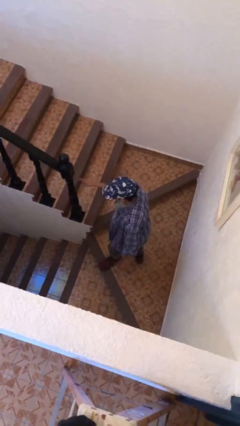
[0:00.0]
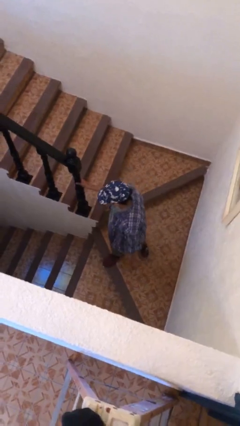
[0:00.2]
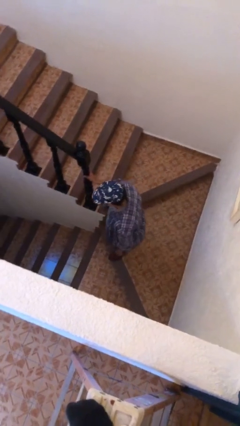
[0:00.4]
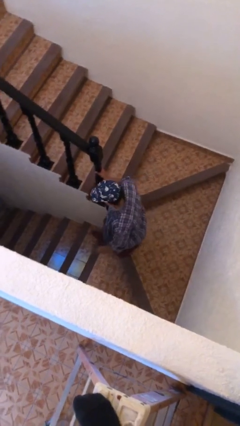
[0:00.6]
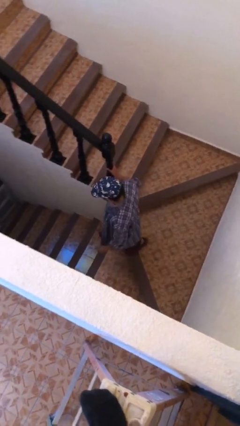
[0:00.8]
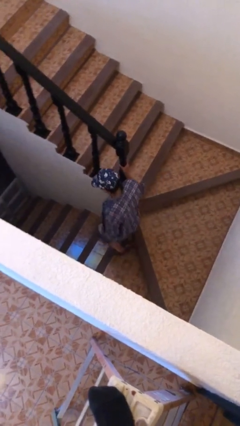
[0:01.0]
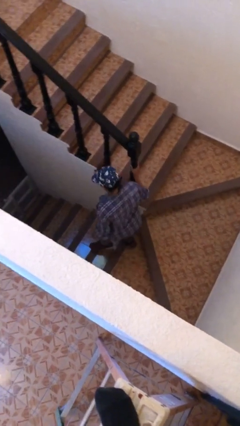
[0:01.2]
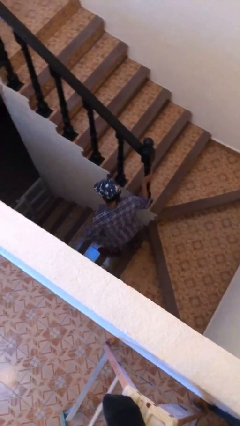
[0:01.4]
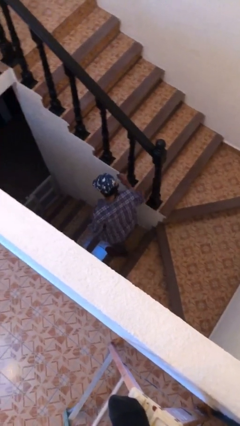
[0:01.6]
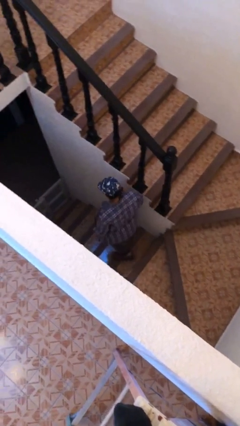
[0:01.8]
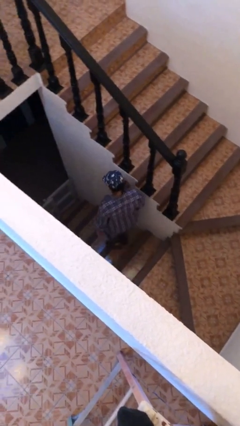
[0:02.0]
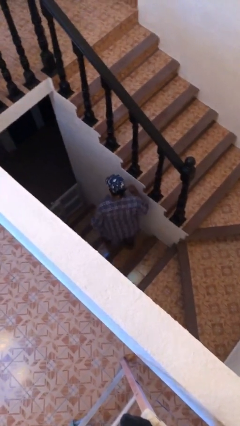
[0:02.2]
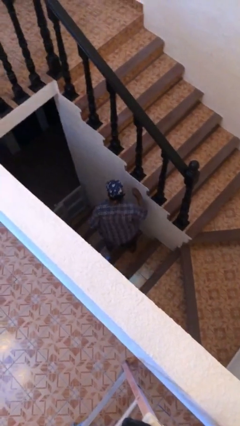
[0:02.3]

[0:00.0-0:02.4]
person climbs down stairs

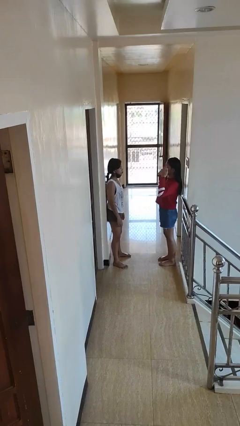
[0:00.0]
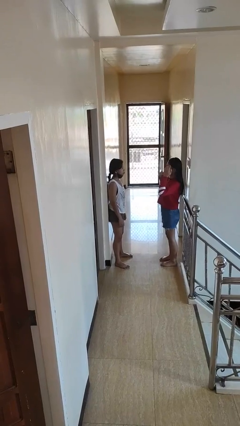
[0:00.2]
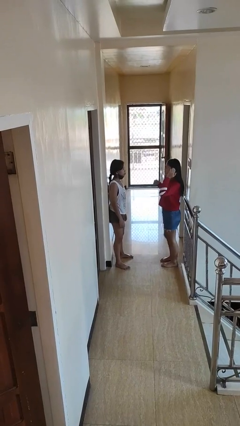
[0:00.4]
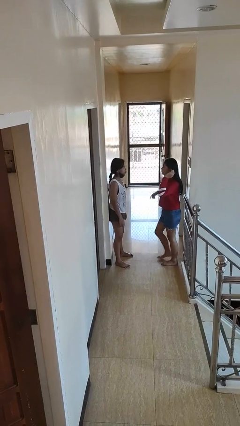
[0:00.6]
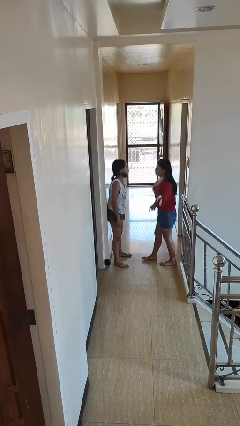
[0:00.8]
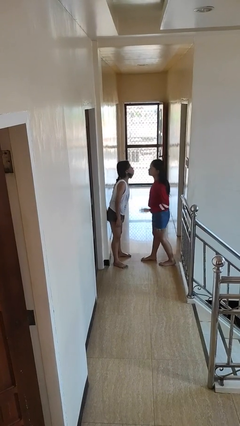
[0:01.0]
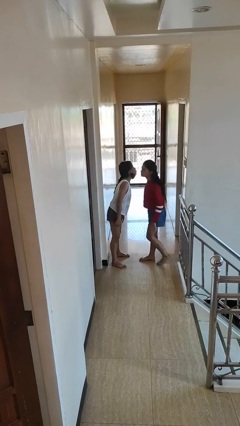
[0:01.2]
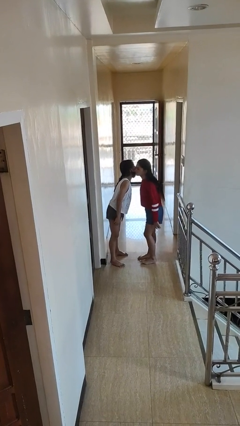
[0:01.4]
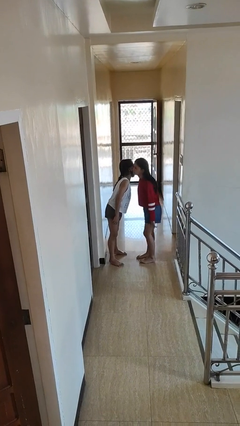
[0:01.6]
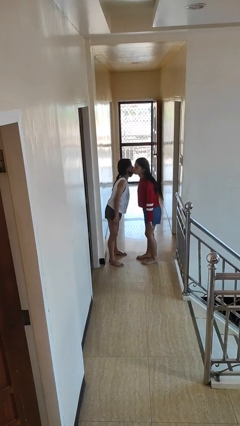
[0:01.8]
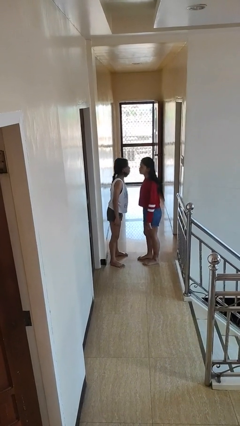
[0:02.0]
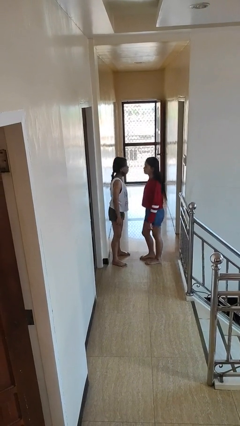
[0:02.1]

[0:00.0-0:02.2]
person kisses cheek of person

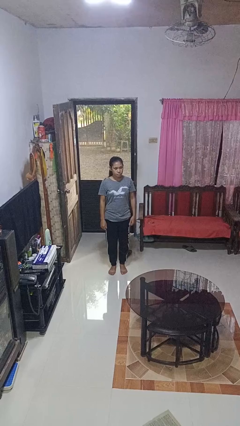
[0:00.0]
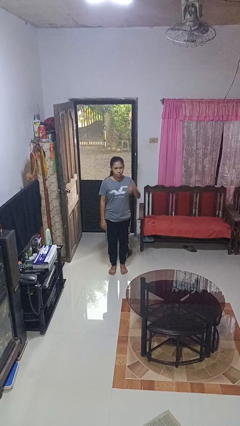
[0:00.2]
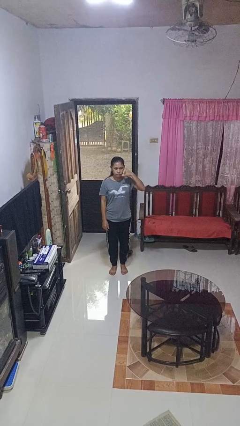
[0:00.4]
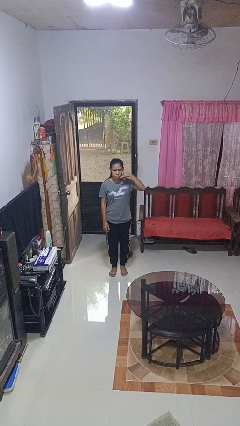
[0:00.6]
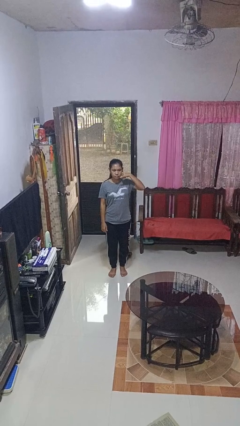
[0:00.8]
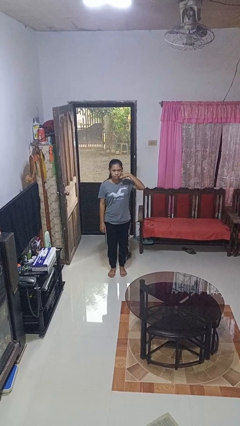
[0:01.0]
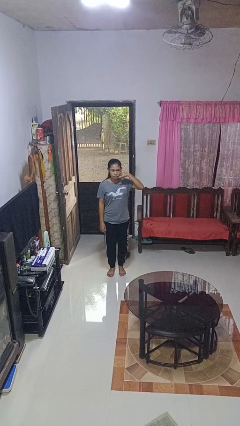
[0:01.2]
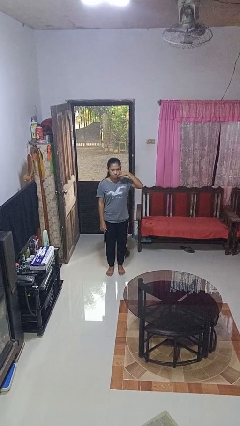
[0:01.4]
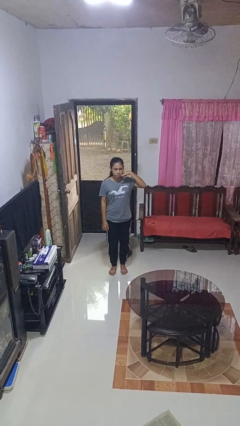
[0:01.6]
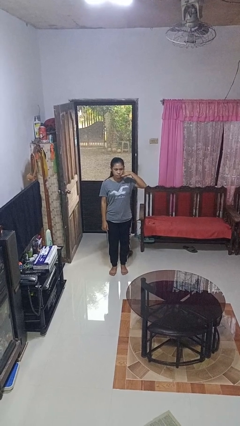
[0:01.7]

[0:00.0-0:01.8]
person gestures call me

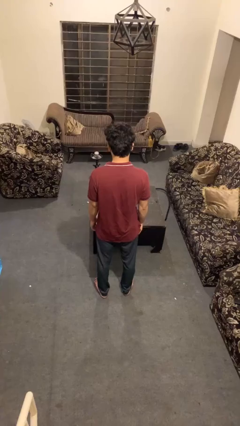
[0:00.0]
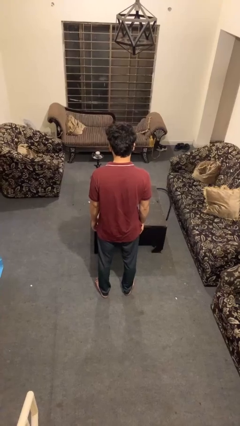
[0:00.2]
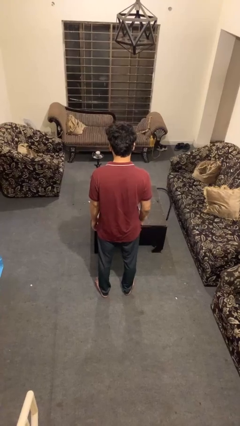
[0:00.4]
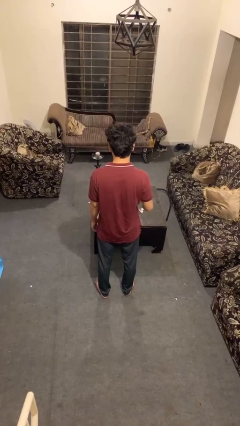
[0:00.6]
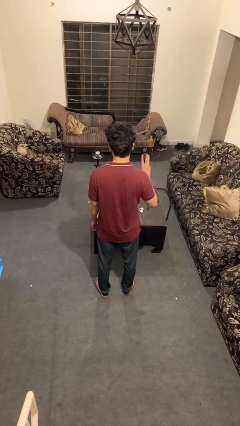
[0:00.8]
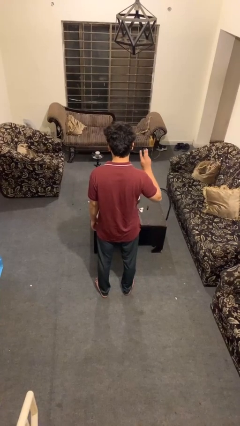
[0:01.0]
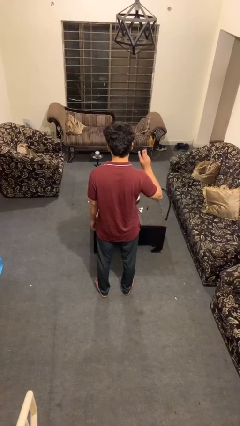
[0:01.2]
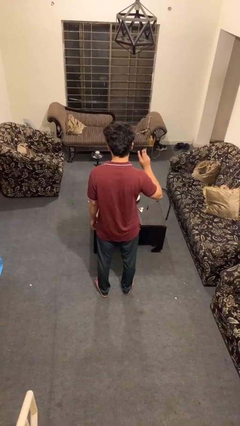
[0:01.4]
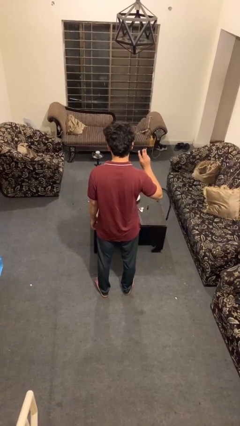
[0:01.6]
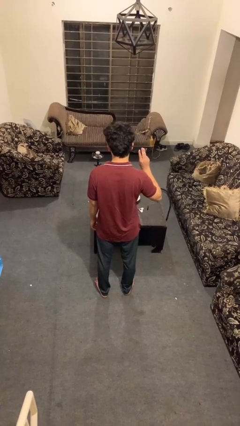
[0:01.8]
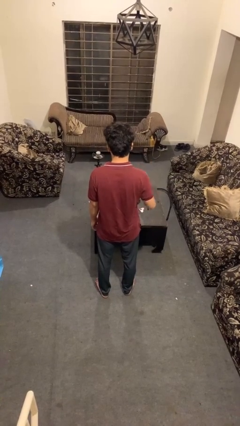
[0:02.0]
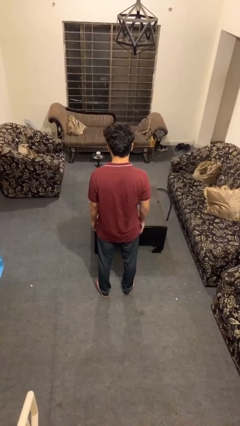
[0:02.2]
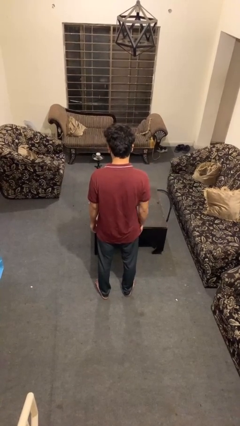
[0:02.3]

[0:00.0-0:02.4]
person gestures number three

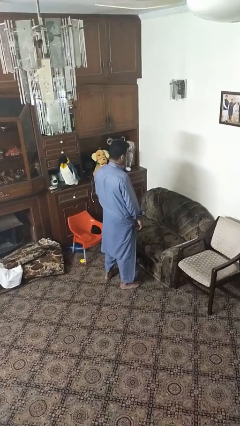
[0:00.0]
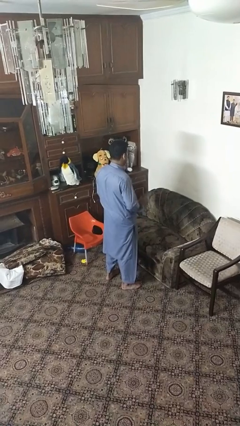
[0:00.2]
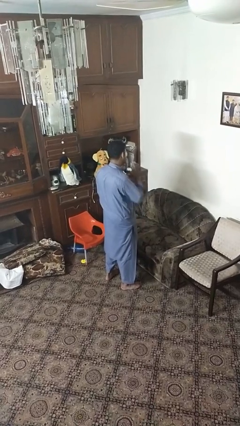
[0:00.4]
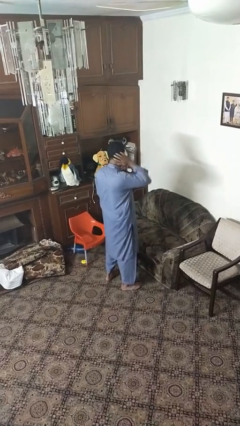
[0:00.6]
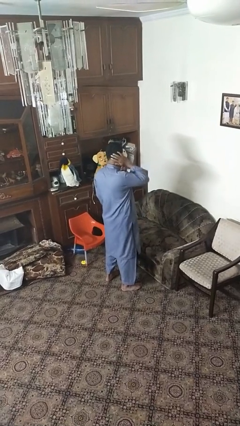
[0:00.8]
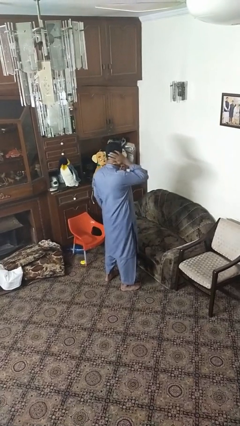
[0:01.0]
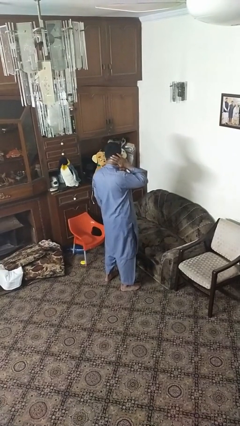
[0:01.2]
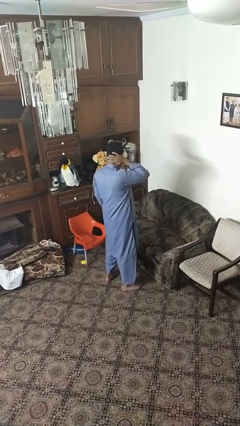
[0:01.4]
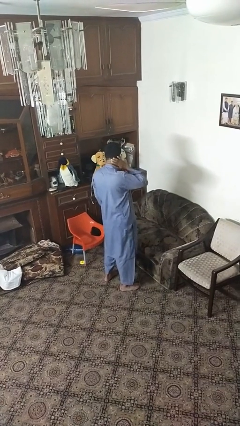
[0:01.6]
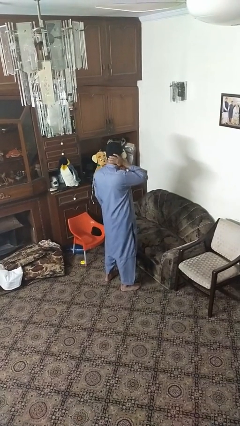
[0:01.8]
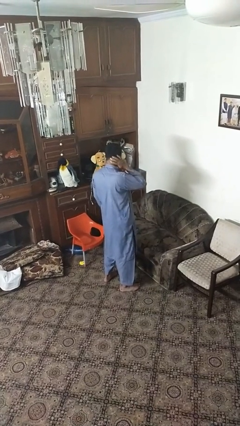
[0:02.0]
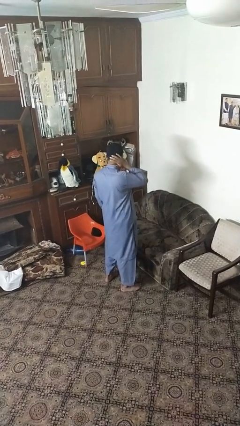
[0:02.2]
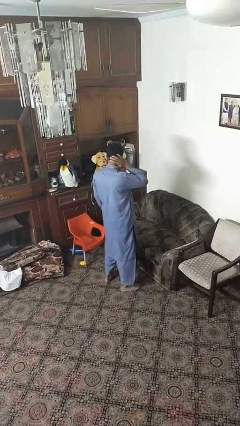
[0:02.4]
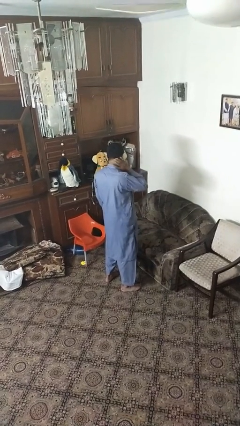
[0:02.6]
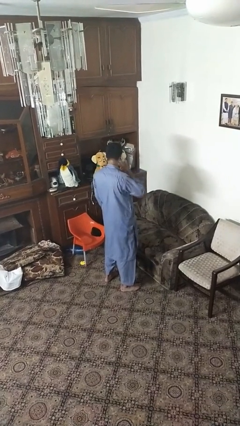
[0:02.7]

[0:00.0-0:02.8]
person strokes hair

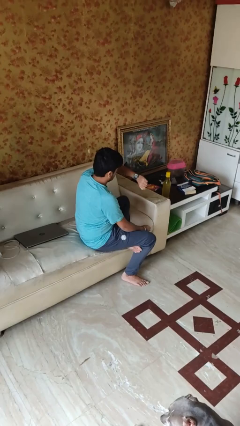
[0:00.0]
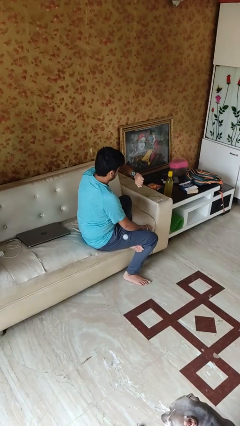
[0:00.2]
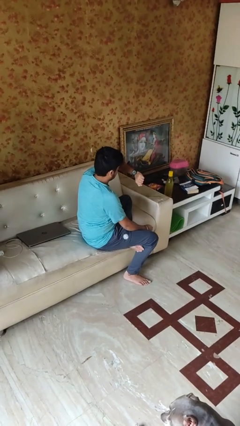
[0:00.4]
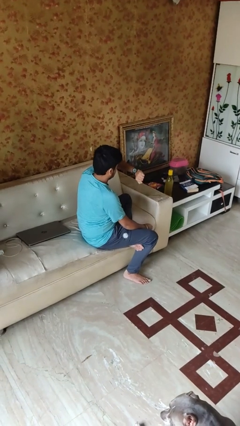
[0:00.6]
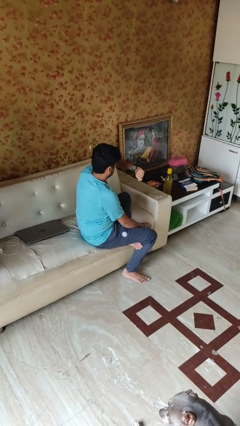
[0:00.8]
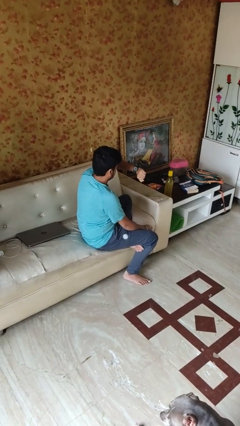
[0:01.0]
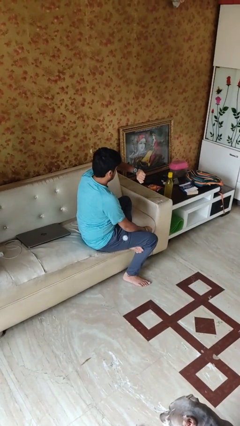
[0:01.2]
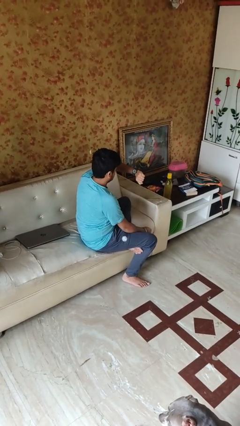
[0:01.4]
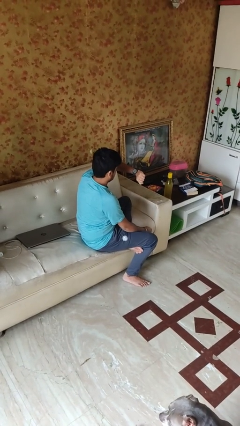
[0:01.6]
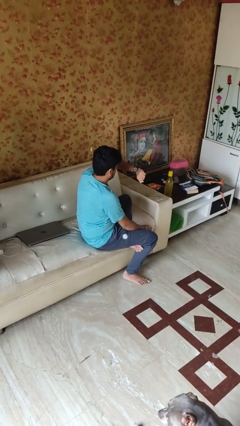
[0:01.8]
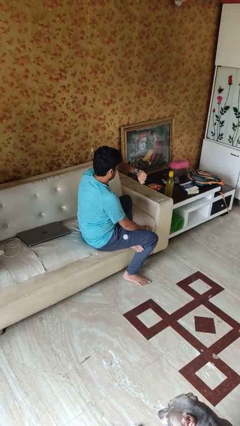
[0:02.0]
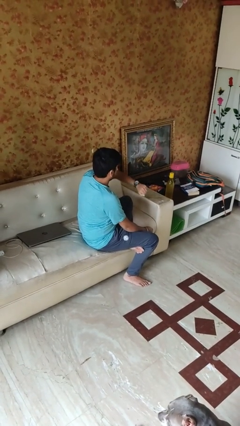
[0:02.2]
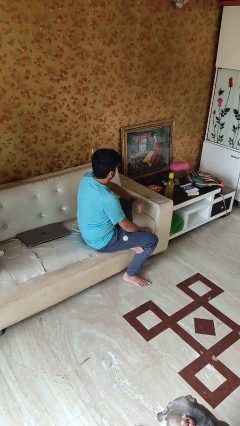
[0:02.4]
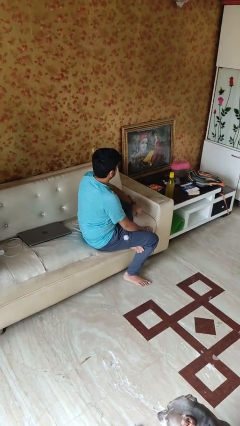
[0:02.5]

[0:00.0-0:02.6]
person looks at wristwatch

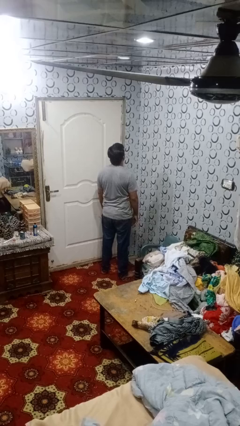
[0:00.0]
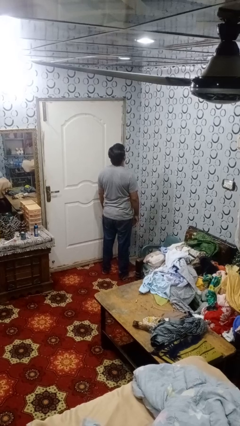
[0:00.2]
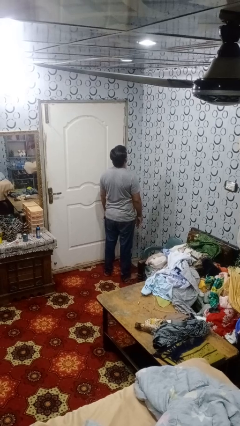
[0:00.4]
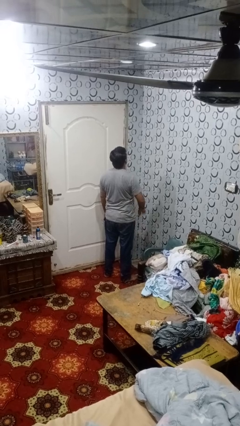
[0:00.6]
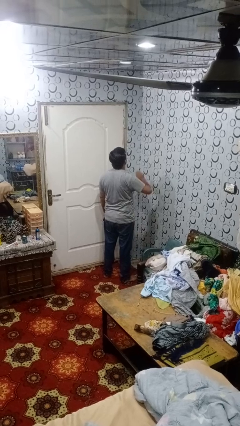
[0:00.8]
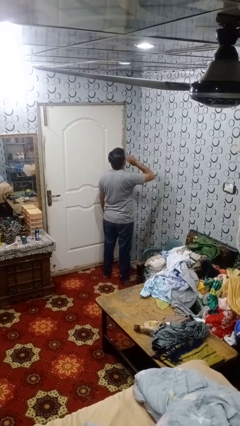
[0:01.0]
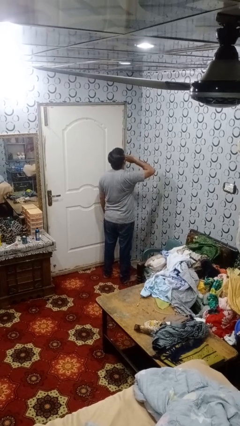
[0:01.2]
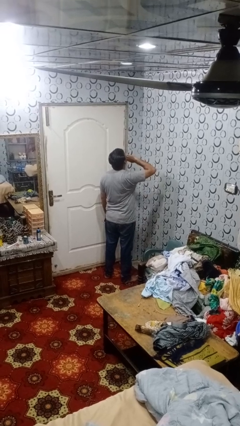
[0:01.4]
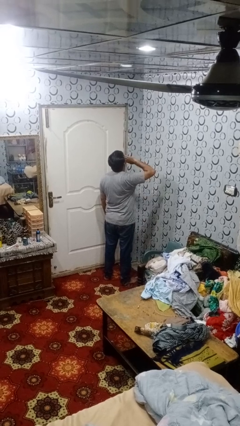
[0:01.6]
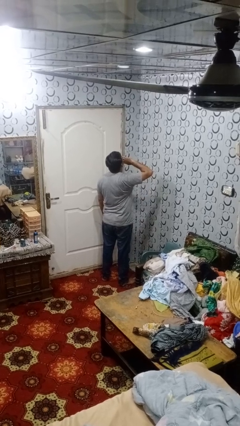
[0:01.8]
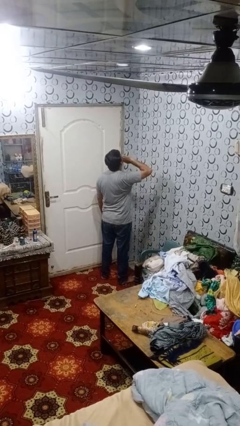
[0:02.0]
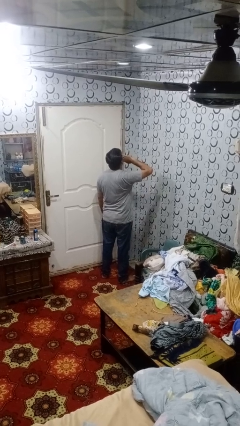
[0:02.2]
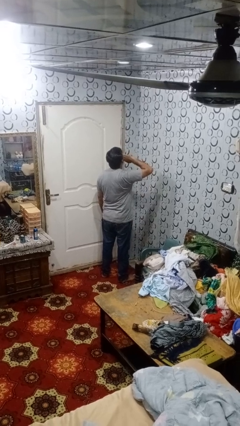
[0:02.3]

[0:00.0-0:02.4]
person yawns
